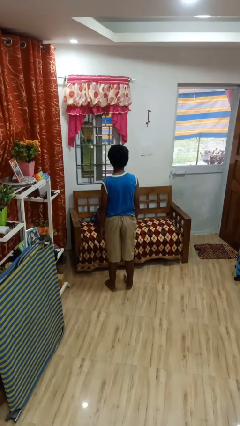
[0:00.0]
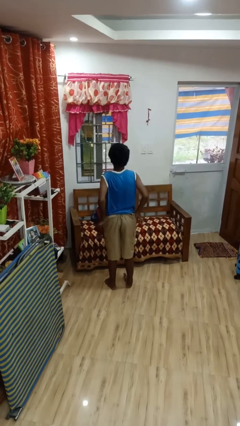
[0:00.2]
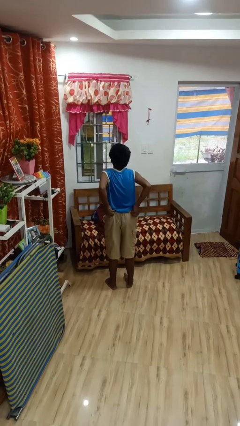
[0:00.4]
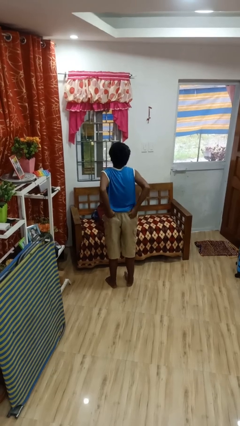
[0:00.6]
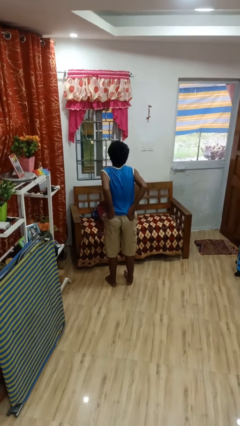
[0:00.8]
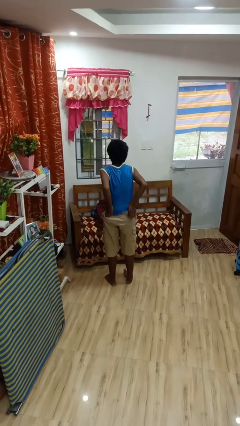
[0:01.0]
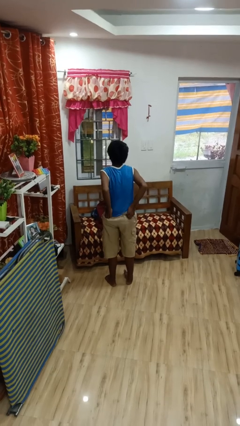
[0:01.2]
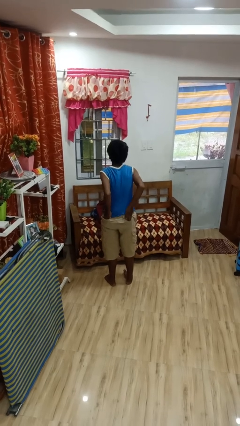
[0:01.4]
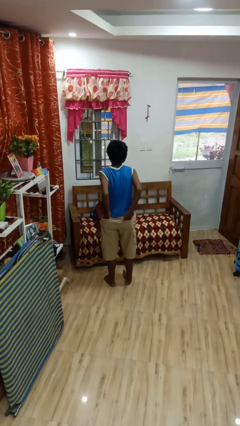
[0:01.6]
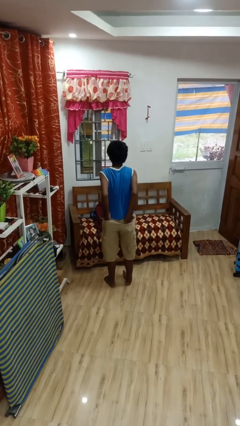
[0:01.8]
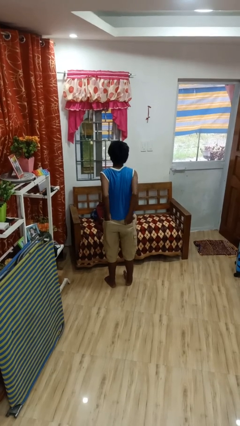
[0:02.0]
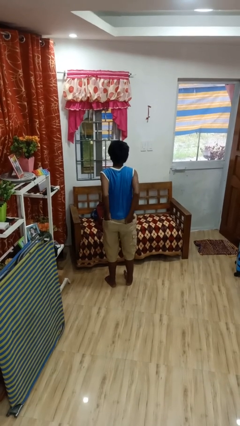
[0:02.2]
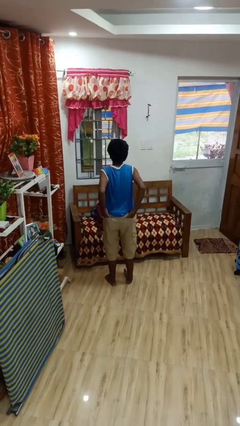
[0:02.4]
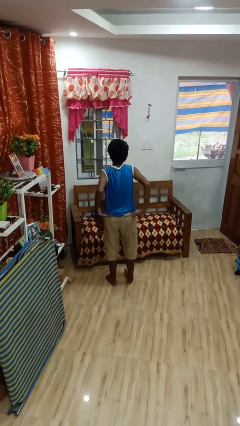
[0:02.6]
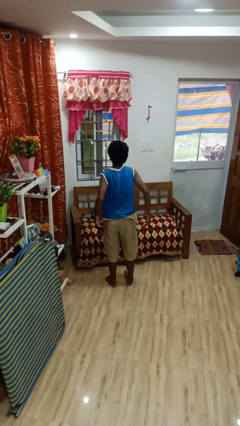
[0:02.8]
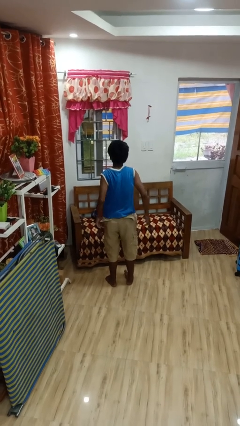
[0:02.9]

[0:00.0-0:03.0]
person puts hands in back pockets

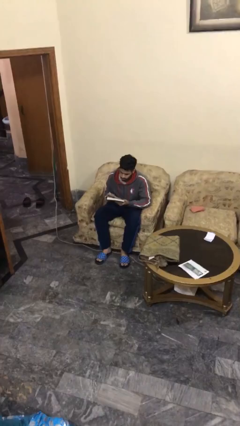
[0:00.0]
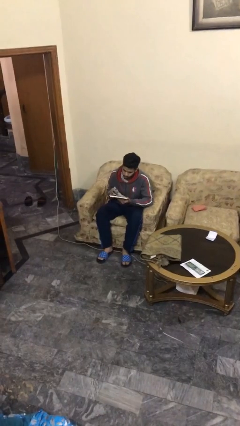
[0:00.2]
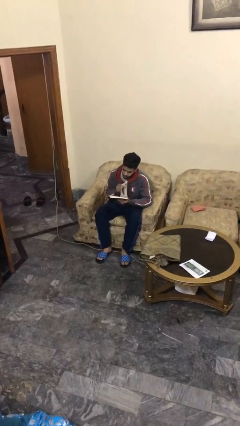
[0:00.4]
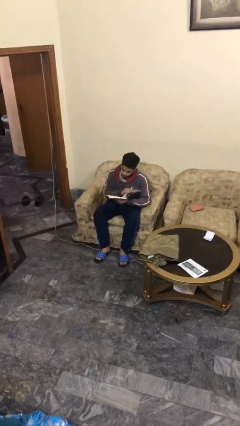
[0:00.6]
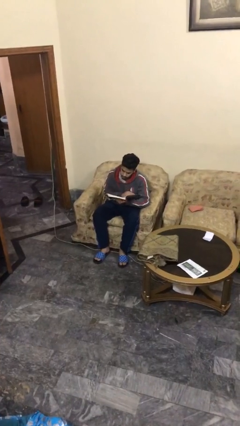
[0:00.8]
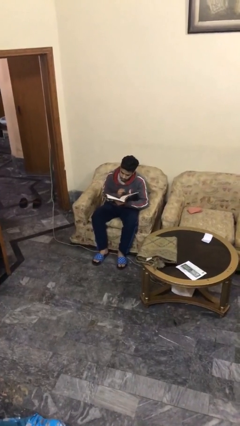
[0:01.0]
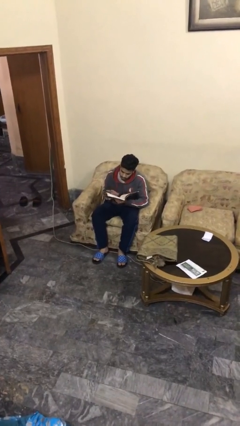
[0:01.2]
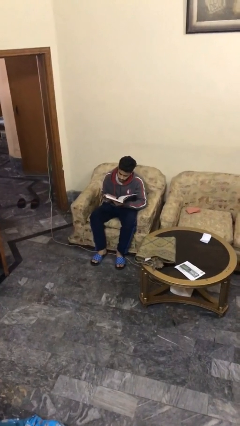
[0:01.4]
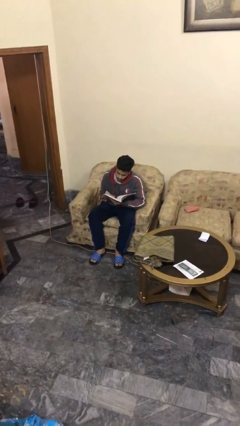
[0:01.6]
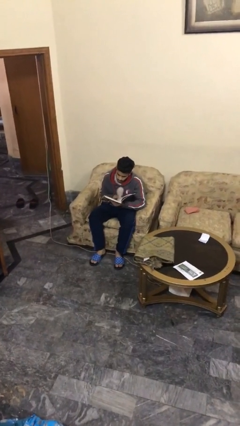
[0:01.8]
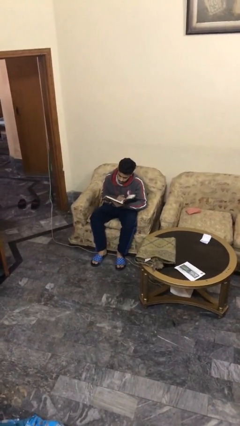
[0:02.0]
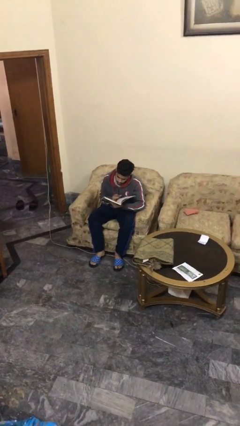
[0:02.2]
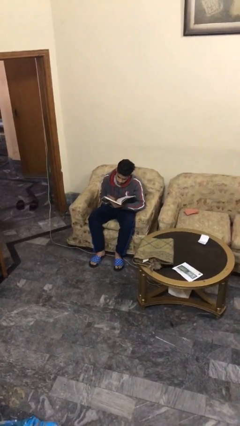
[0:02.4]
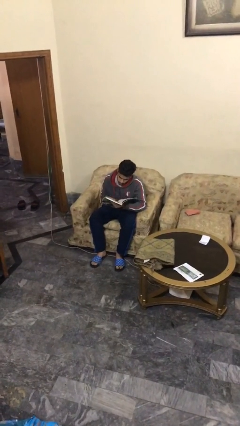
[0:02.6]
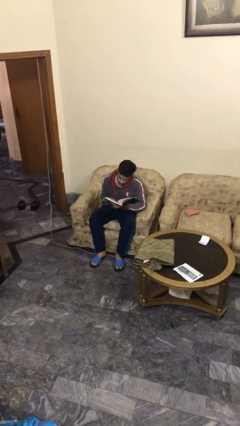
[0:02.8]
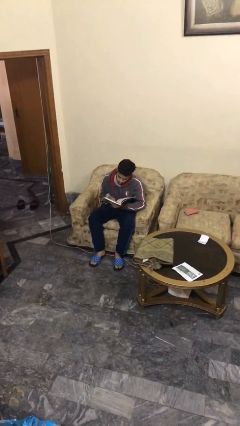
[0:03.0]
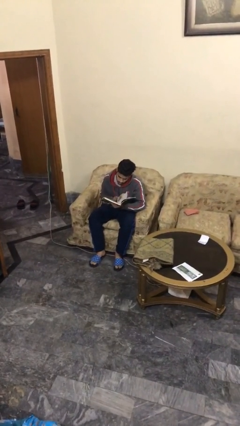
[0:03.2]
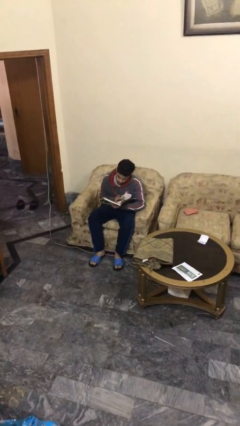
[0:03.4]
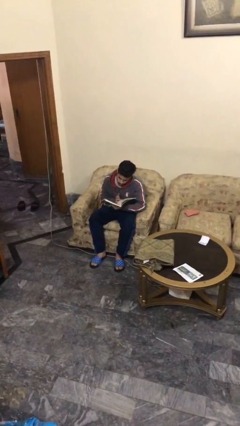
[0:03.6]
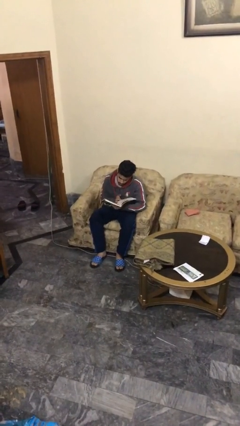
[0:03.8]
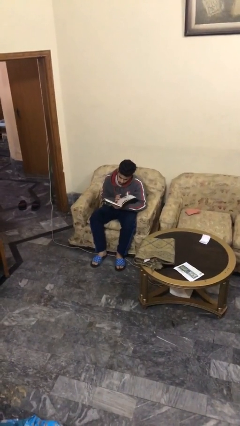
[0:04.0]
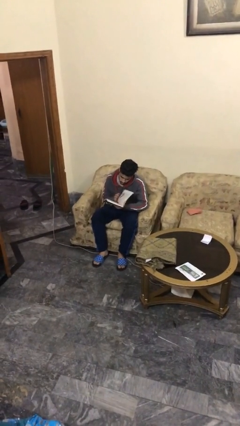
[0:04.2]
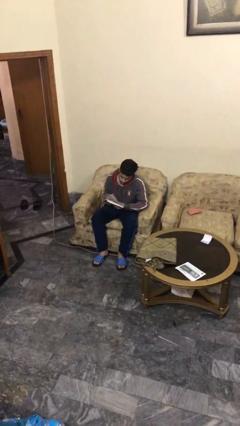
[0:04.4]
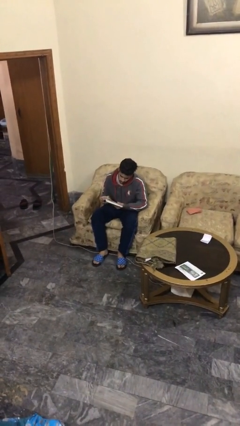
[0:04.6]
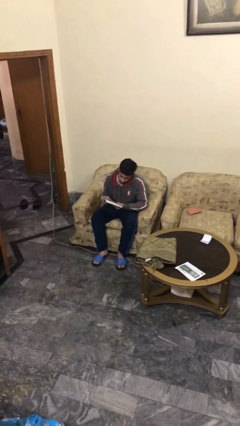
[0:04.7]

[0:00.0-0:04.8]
person reads document

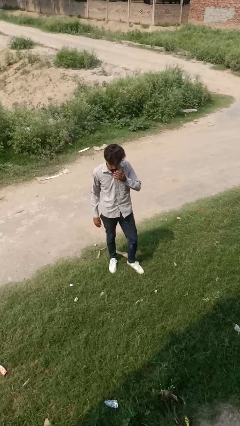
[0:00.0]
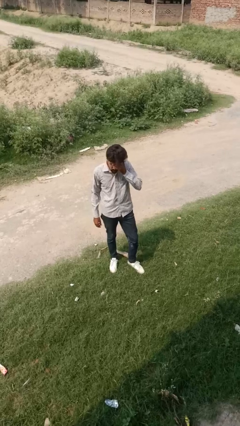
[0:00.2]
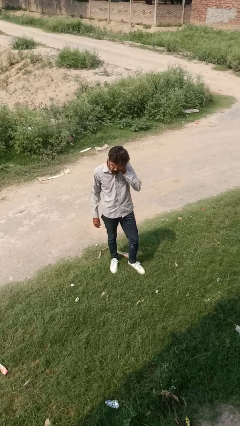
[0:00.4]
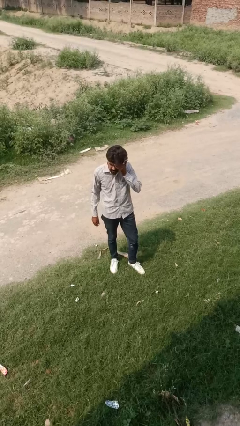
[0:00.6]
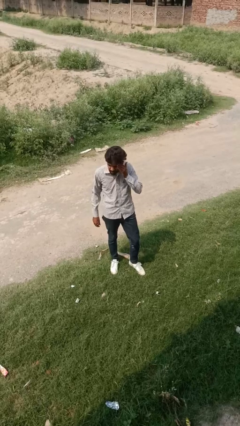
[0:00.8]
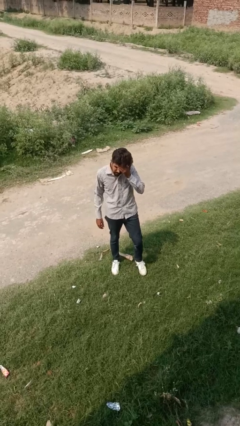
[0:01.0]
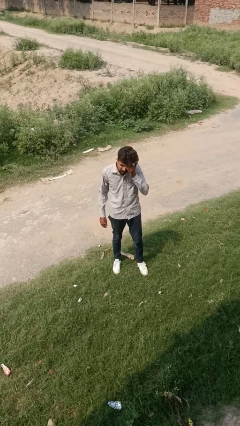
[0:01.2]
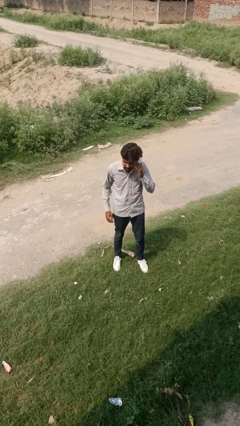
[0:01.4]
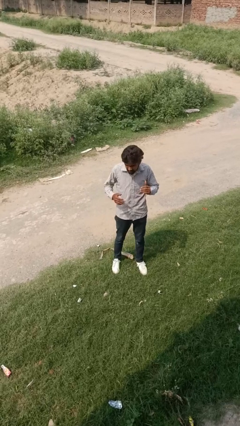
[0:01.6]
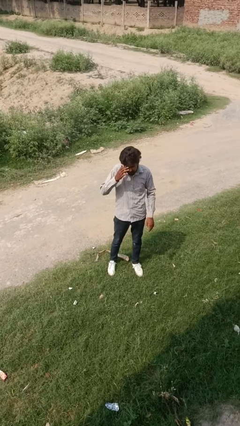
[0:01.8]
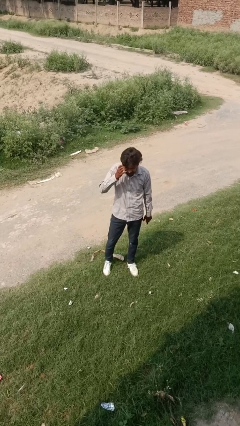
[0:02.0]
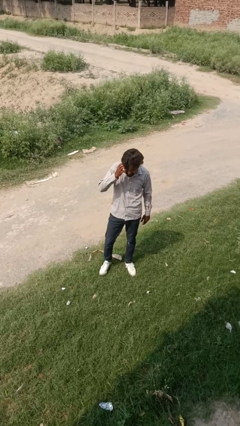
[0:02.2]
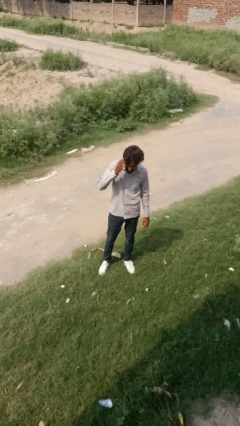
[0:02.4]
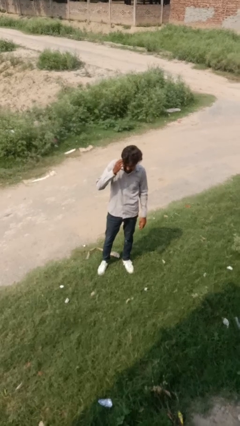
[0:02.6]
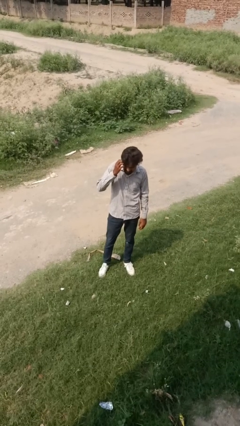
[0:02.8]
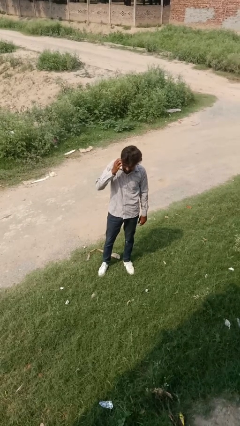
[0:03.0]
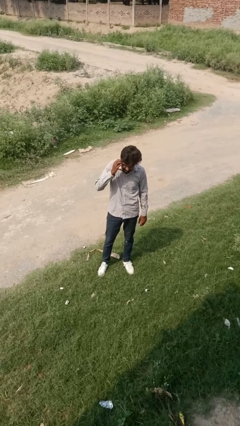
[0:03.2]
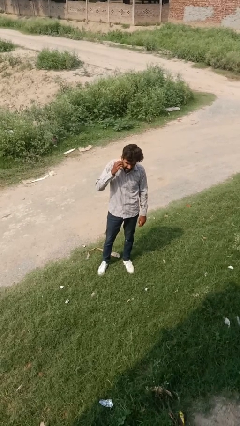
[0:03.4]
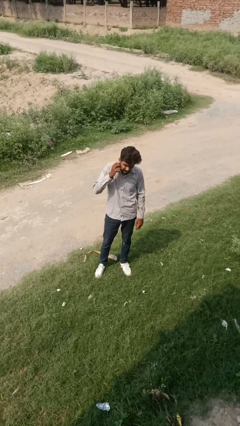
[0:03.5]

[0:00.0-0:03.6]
person scratches face

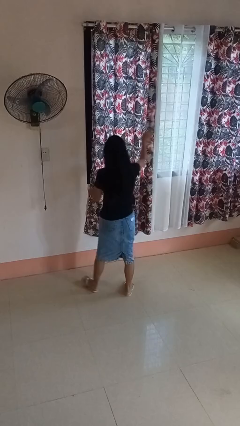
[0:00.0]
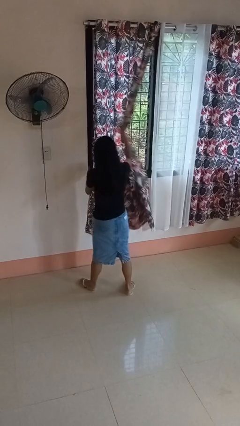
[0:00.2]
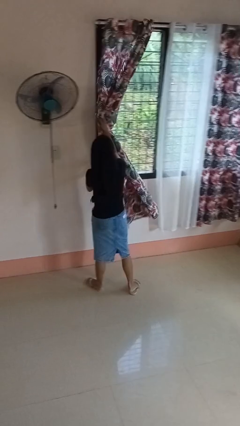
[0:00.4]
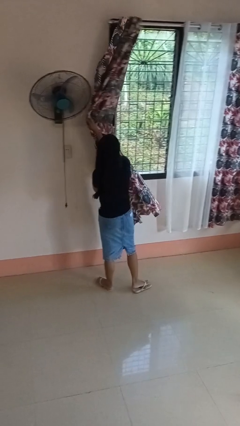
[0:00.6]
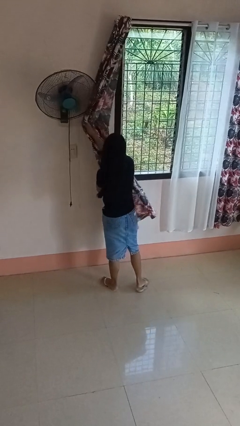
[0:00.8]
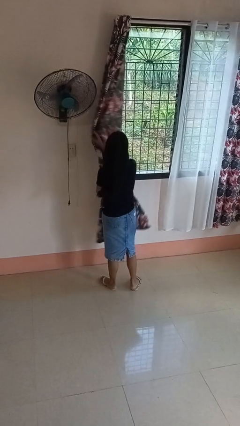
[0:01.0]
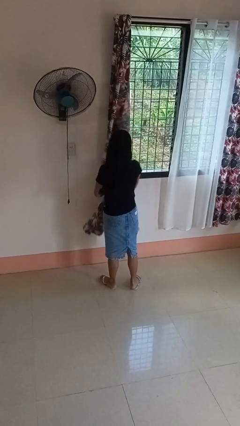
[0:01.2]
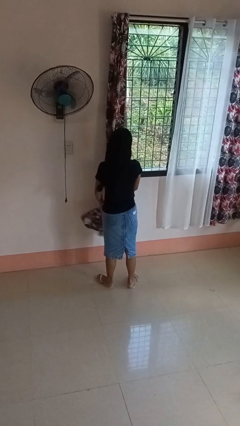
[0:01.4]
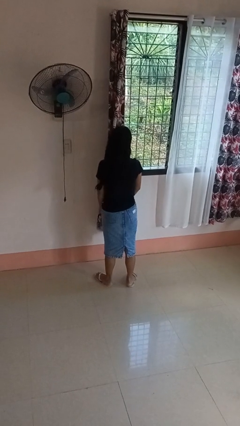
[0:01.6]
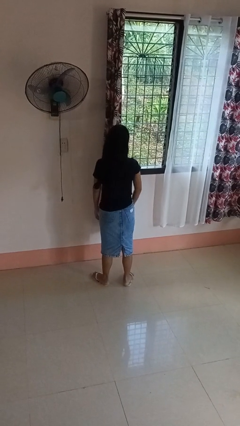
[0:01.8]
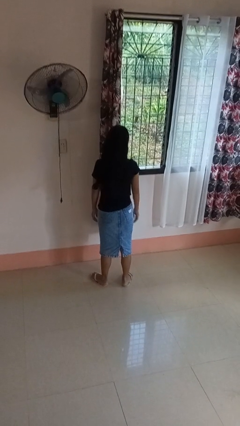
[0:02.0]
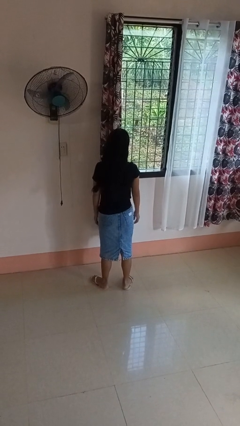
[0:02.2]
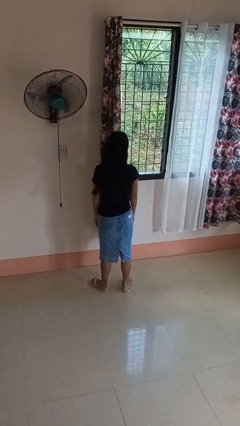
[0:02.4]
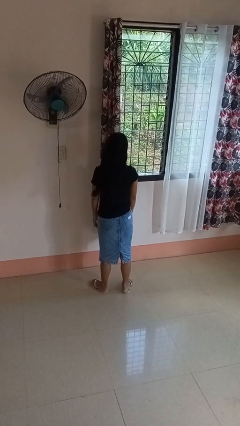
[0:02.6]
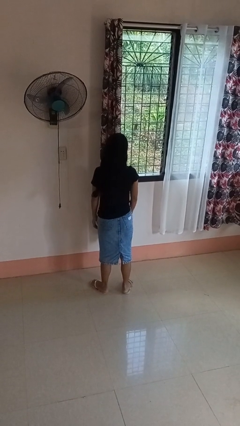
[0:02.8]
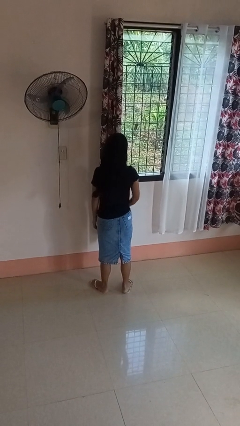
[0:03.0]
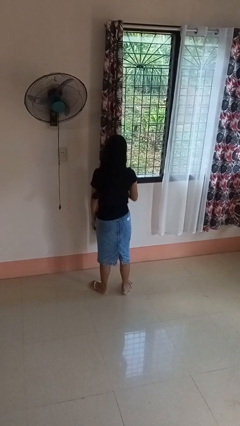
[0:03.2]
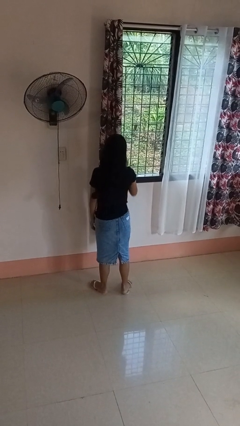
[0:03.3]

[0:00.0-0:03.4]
person opens curtains

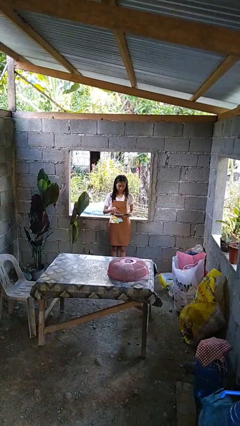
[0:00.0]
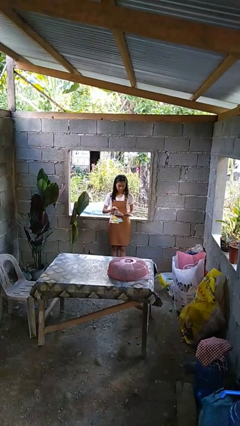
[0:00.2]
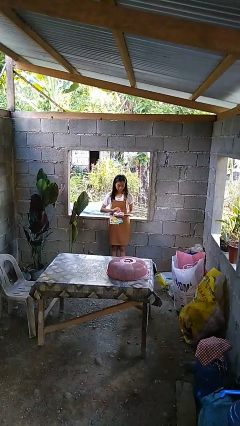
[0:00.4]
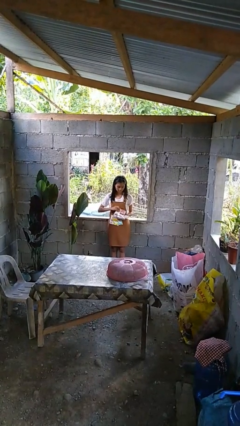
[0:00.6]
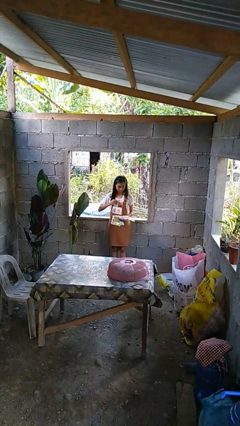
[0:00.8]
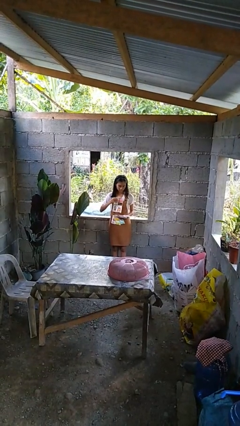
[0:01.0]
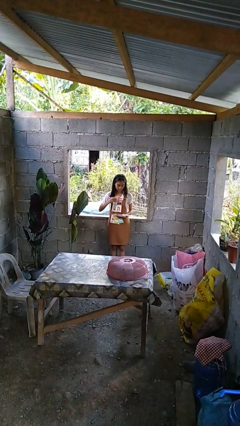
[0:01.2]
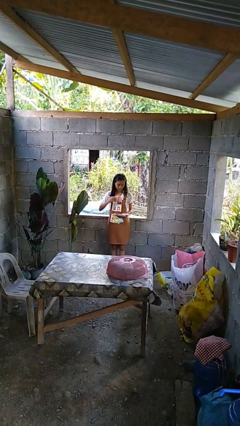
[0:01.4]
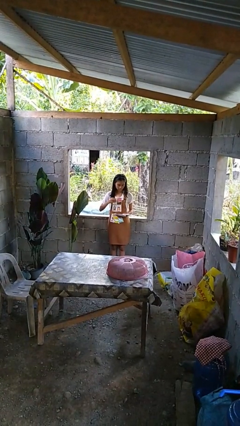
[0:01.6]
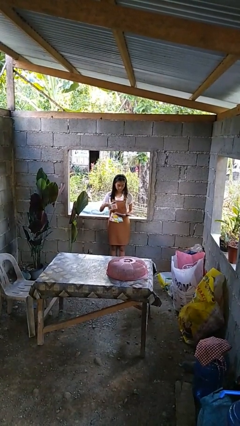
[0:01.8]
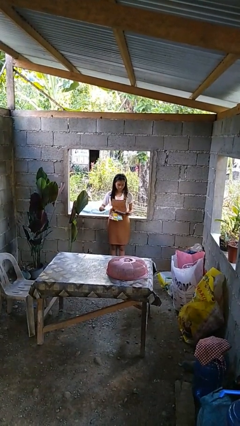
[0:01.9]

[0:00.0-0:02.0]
person tears paper

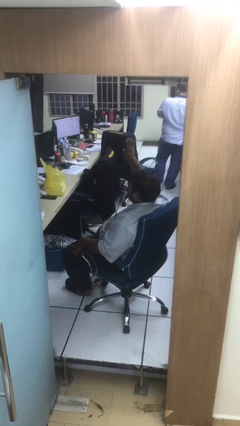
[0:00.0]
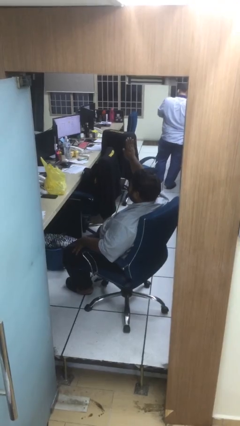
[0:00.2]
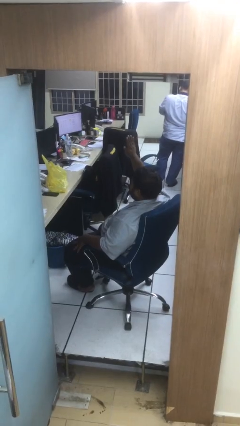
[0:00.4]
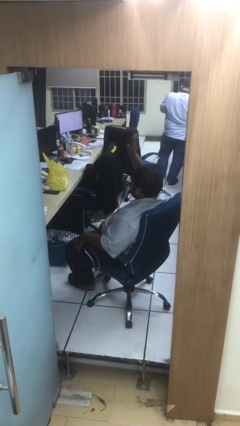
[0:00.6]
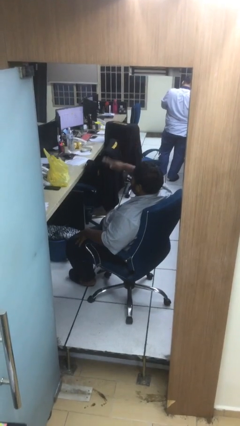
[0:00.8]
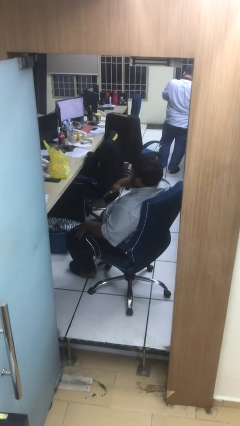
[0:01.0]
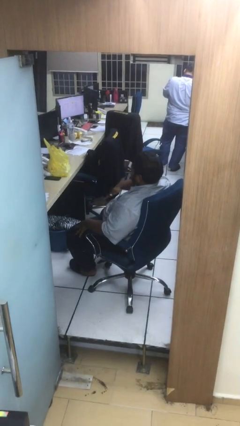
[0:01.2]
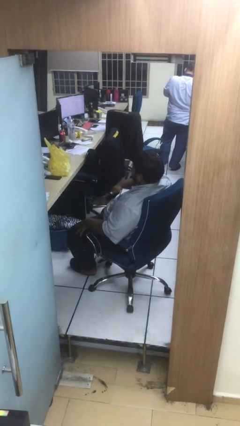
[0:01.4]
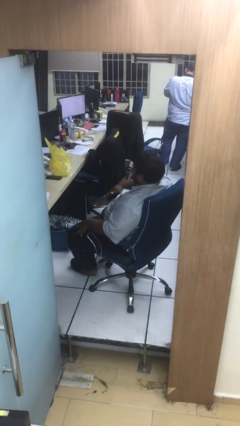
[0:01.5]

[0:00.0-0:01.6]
person gestures swipe down
